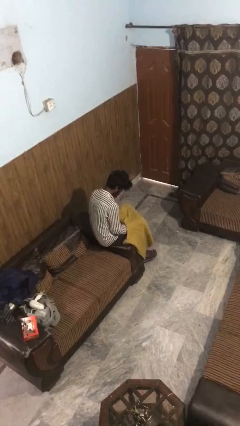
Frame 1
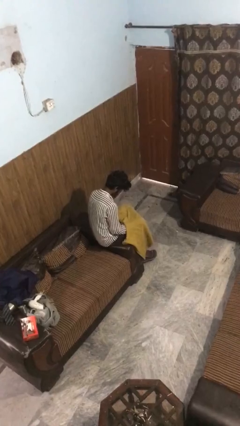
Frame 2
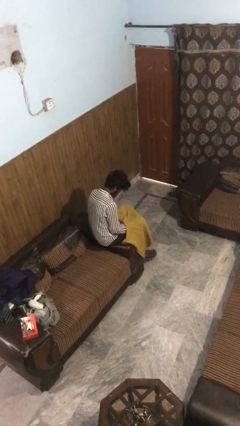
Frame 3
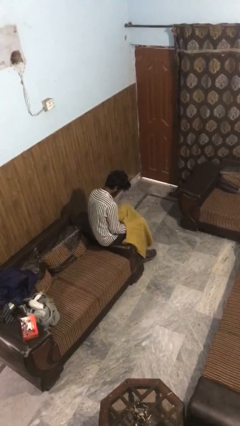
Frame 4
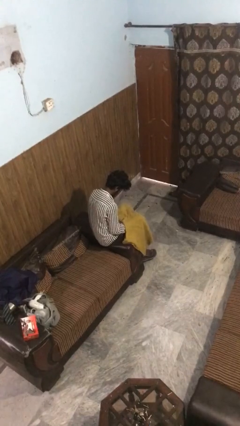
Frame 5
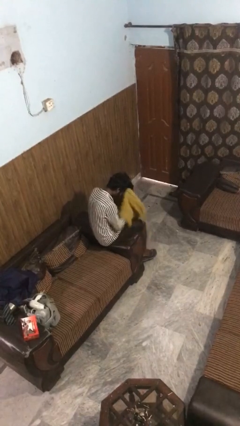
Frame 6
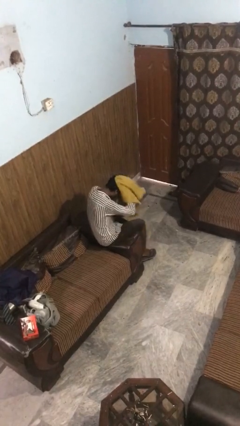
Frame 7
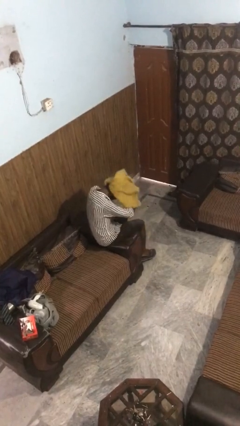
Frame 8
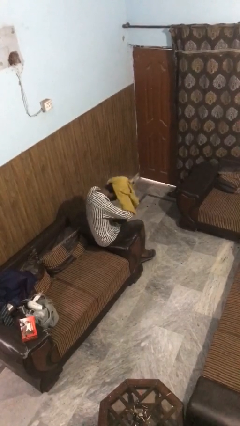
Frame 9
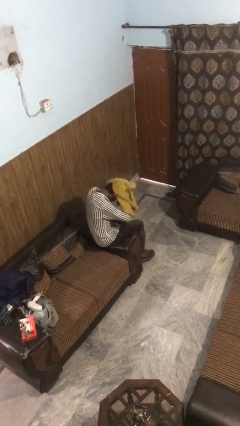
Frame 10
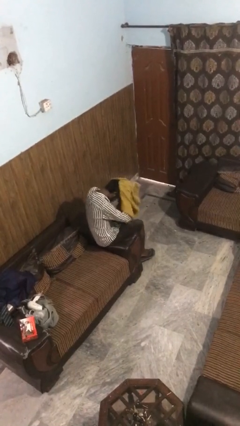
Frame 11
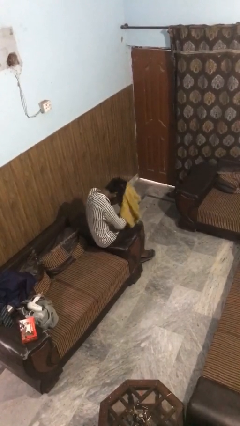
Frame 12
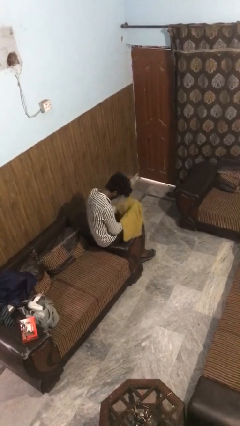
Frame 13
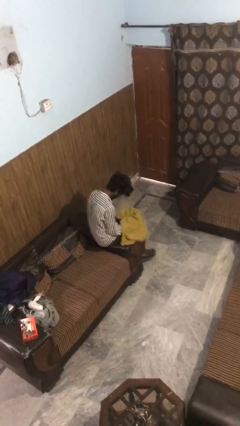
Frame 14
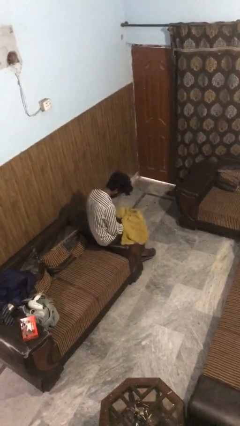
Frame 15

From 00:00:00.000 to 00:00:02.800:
person dries hair with towel

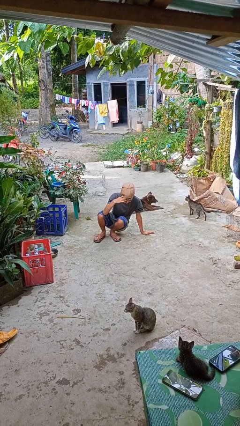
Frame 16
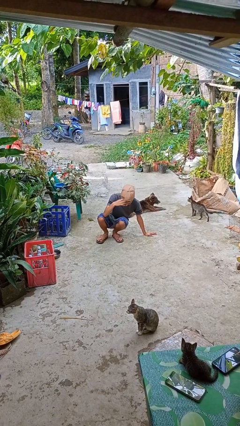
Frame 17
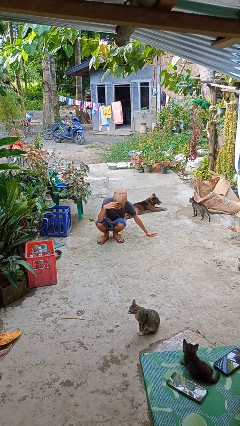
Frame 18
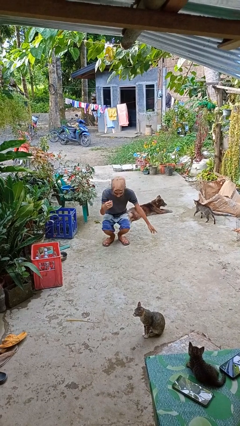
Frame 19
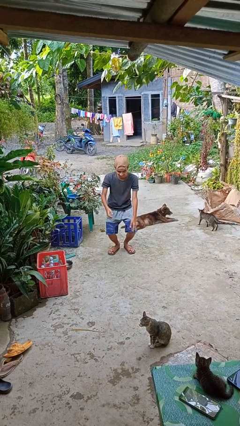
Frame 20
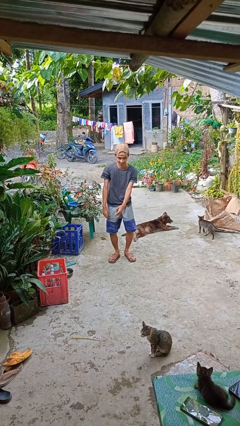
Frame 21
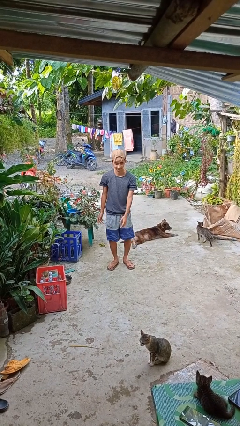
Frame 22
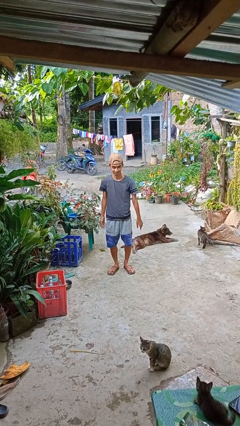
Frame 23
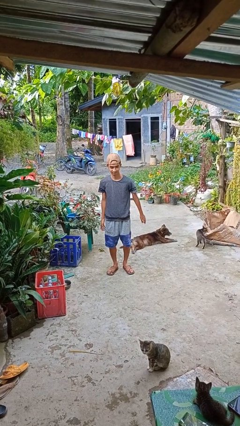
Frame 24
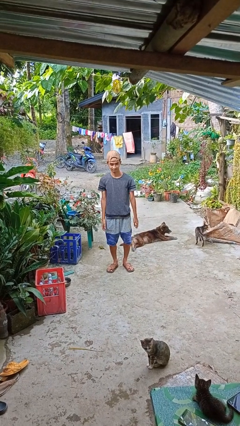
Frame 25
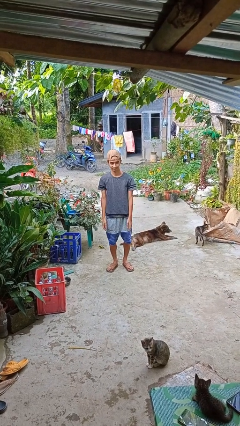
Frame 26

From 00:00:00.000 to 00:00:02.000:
person stands up from floor

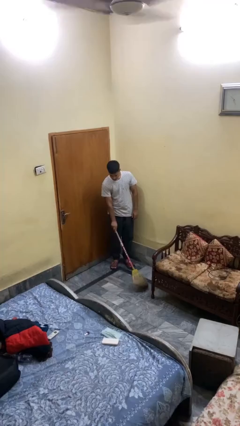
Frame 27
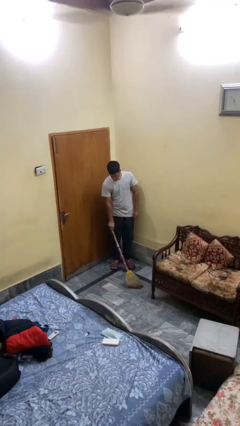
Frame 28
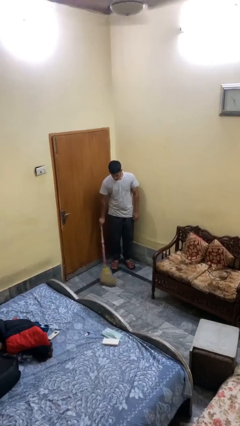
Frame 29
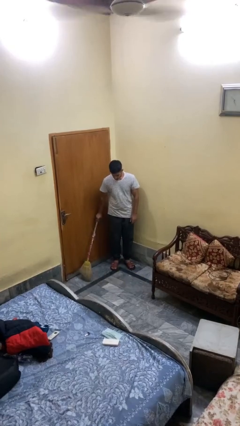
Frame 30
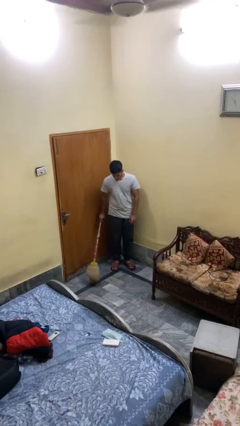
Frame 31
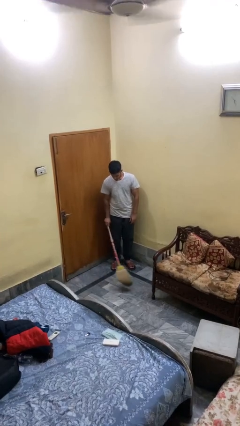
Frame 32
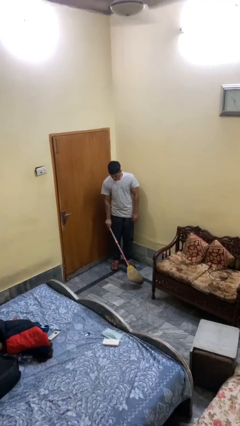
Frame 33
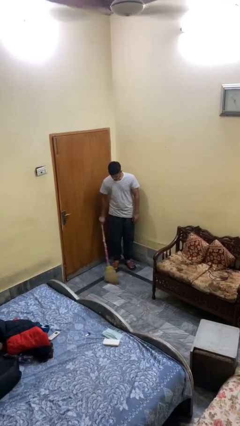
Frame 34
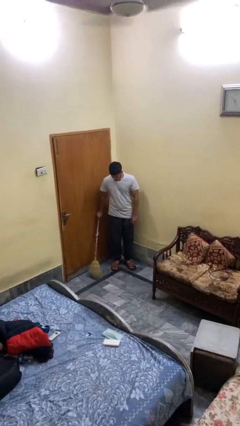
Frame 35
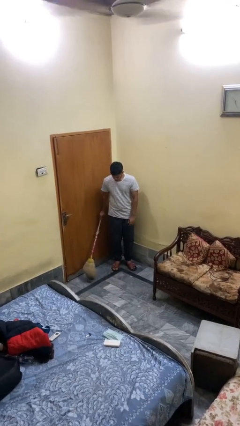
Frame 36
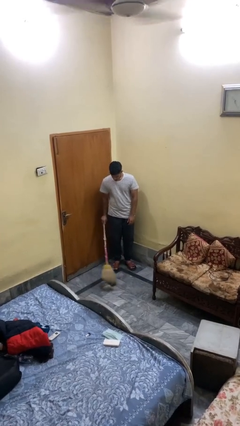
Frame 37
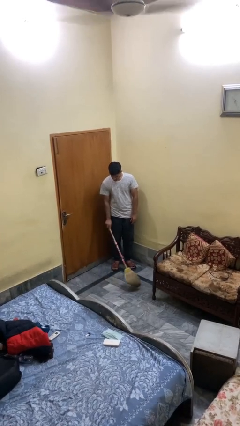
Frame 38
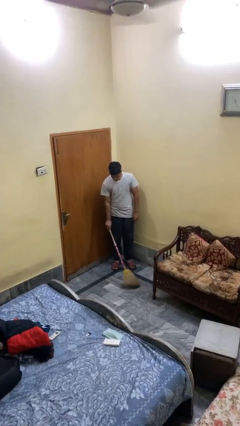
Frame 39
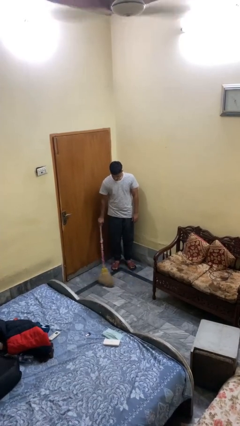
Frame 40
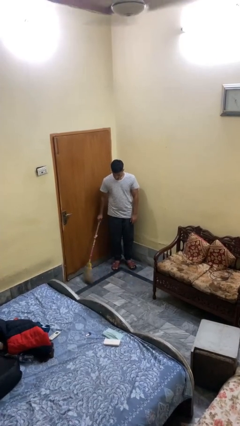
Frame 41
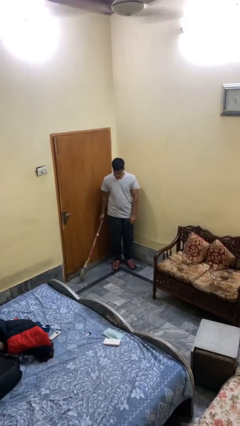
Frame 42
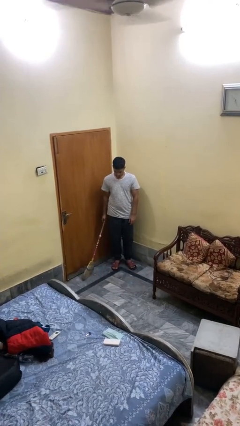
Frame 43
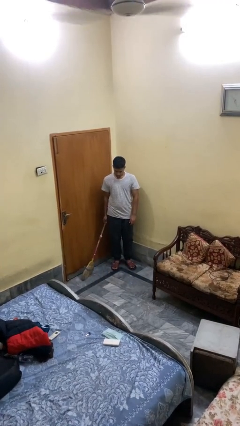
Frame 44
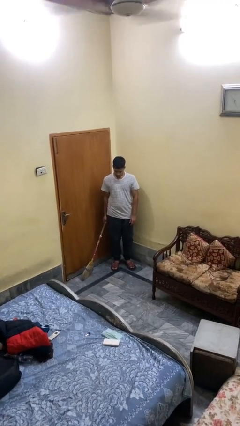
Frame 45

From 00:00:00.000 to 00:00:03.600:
person sweeps floor

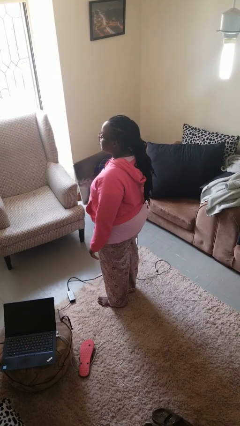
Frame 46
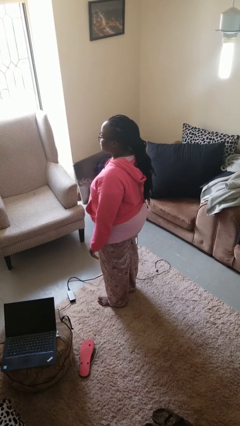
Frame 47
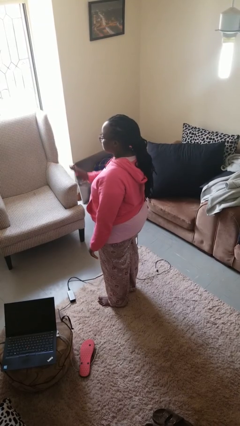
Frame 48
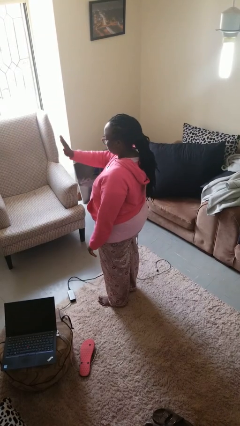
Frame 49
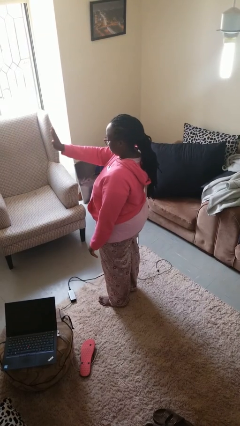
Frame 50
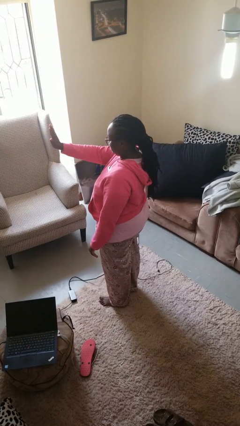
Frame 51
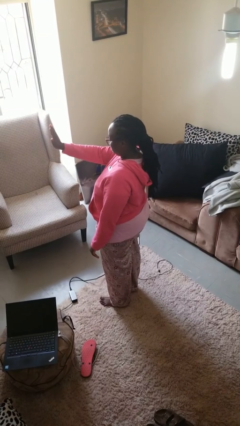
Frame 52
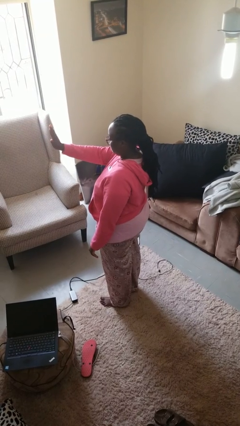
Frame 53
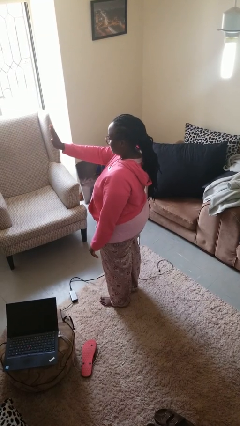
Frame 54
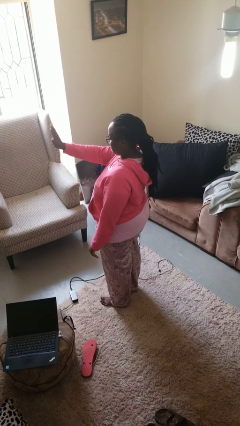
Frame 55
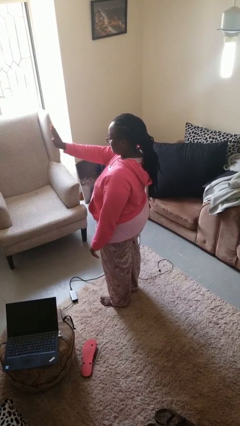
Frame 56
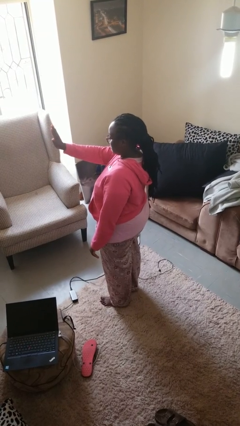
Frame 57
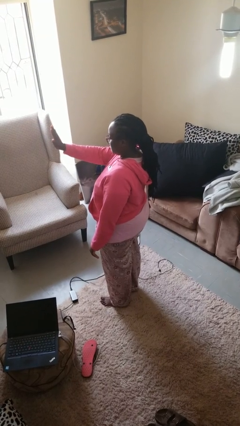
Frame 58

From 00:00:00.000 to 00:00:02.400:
person gestures stop

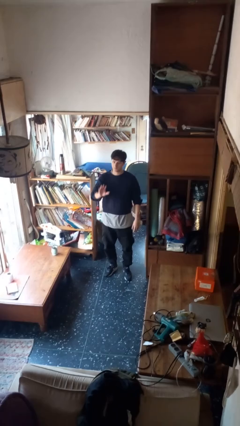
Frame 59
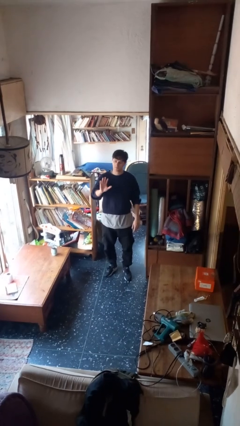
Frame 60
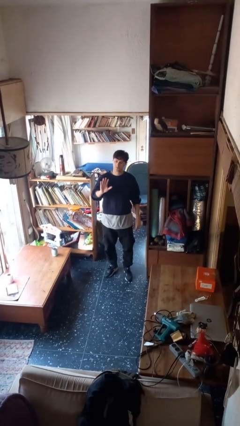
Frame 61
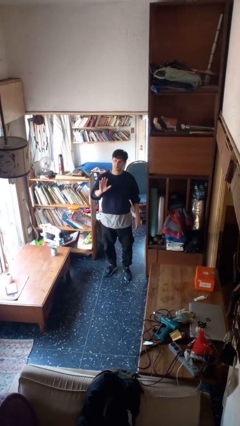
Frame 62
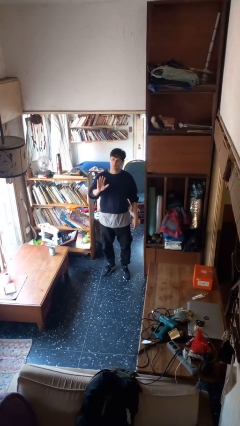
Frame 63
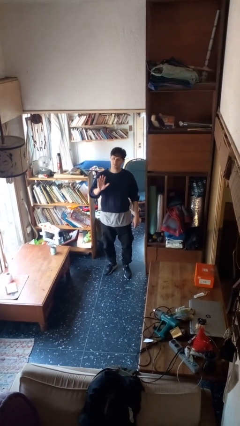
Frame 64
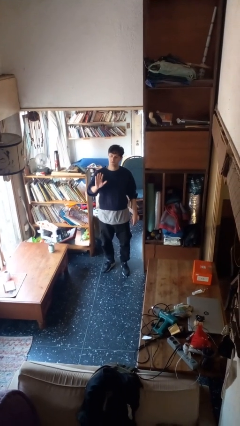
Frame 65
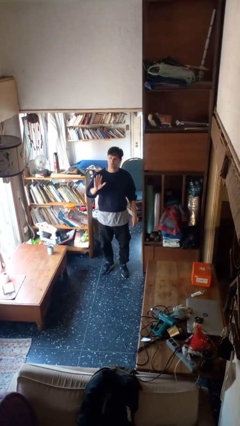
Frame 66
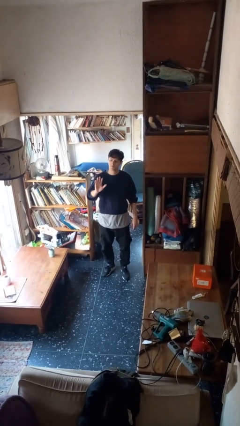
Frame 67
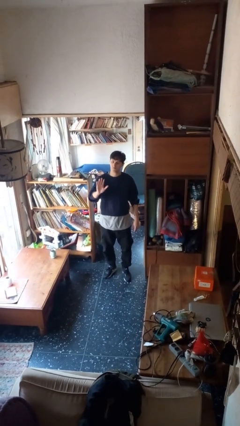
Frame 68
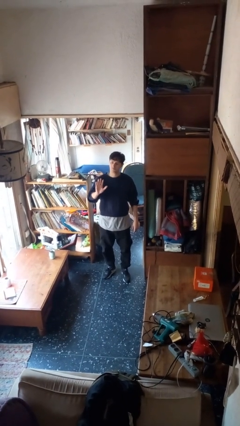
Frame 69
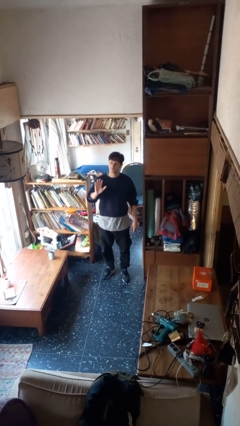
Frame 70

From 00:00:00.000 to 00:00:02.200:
person gestures number five

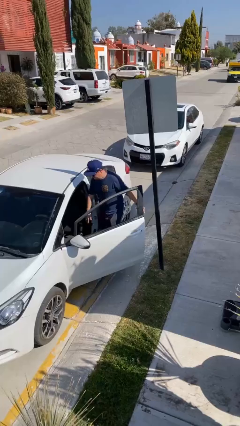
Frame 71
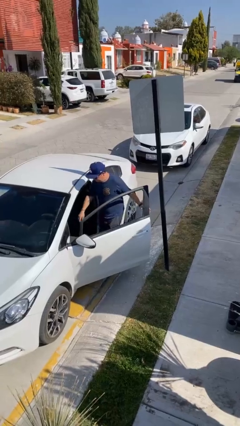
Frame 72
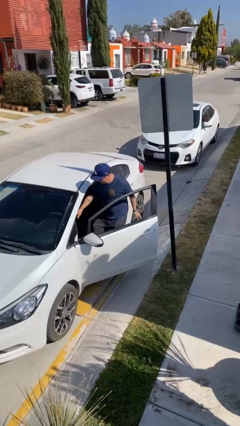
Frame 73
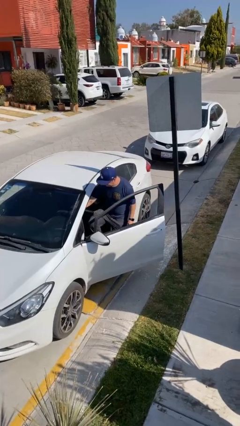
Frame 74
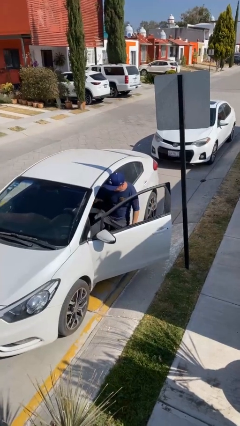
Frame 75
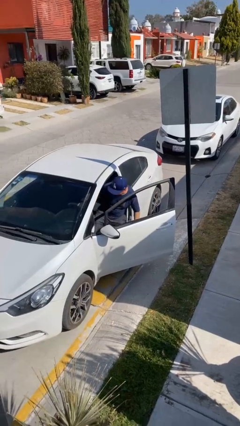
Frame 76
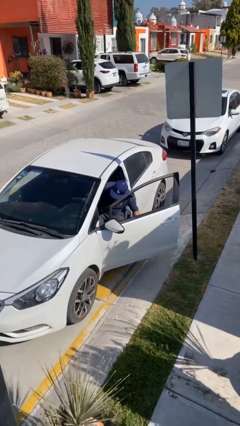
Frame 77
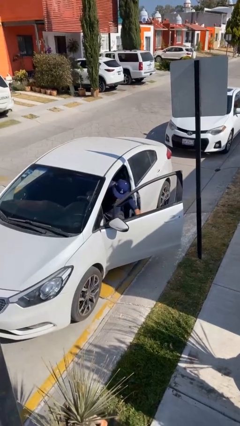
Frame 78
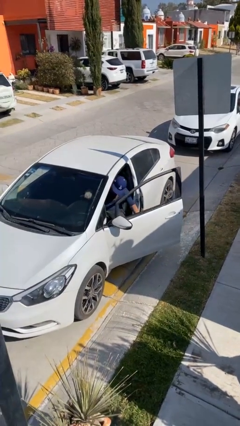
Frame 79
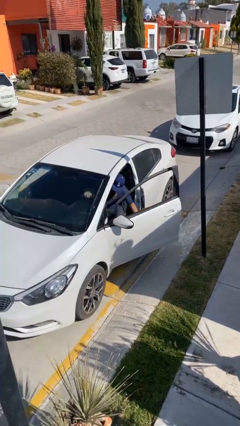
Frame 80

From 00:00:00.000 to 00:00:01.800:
person enters car

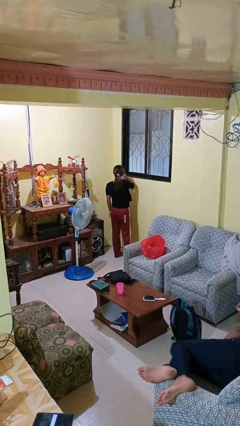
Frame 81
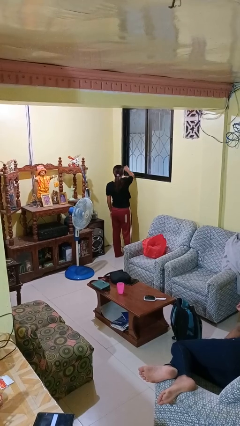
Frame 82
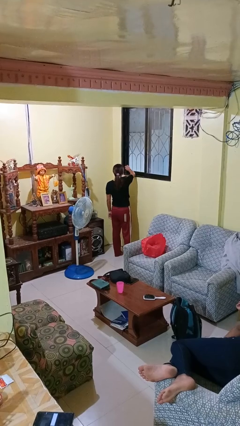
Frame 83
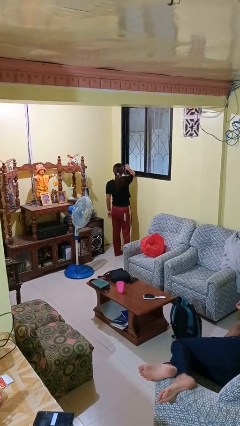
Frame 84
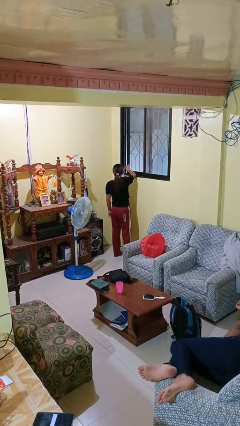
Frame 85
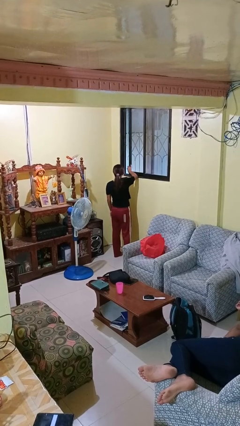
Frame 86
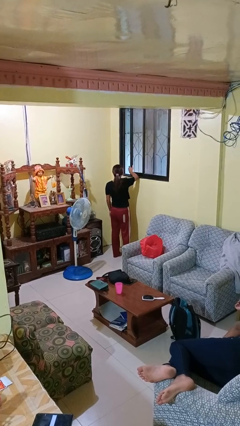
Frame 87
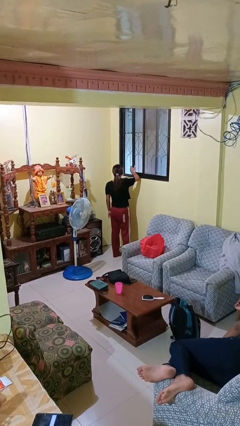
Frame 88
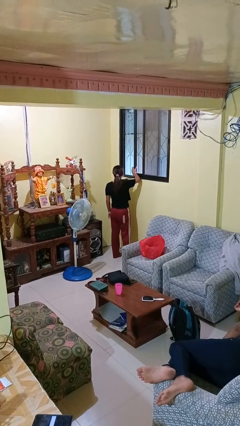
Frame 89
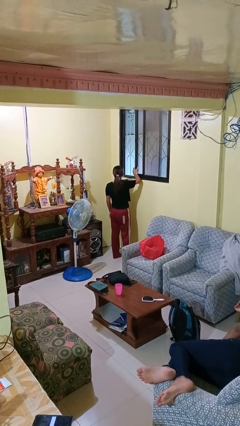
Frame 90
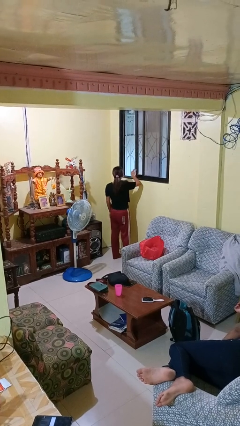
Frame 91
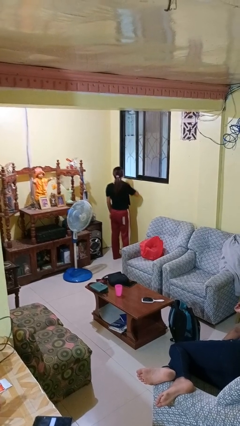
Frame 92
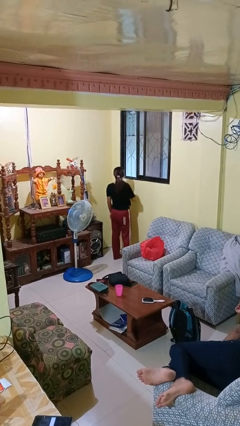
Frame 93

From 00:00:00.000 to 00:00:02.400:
person opens home window

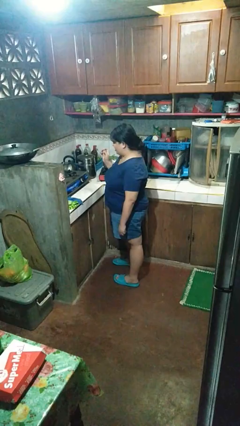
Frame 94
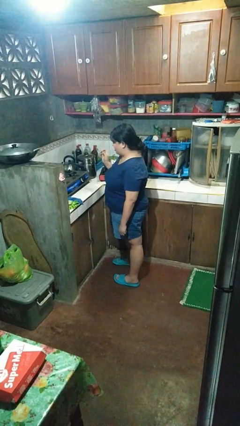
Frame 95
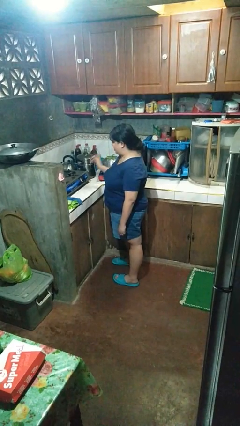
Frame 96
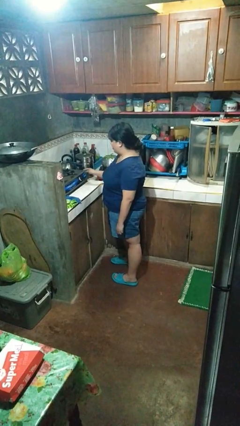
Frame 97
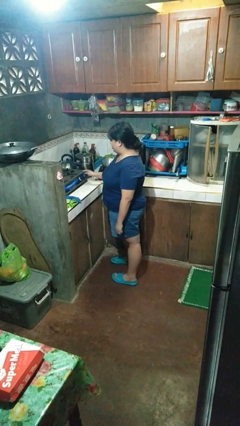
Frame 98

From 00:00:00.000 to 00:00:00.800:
person burns hand
